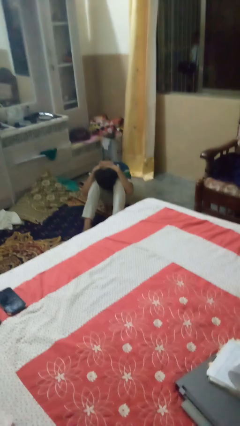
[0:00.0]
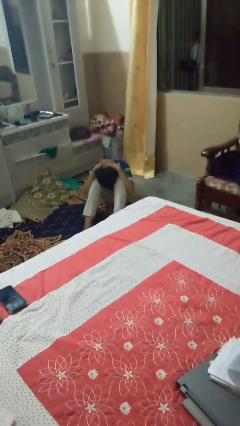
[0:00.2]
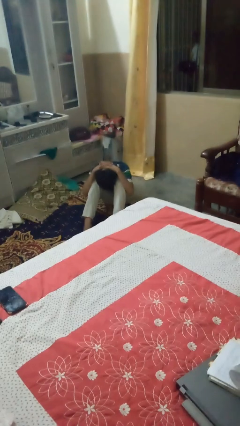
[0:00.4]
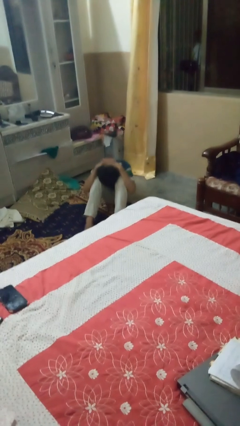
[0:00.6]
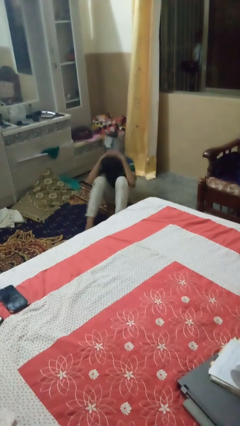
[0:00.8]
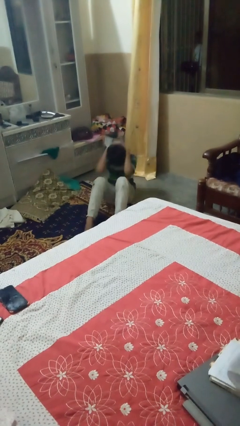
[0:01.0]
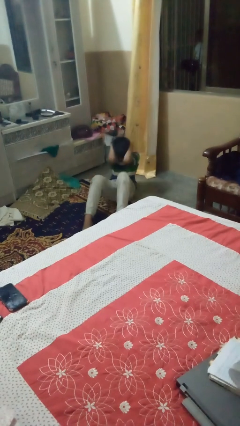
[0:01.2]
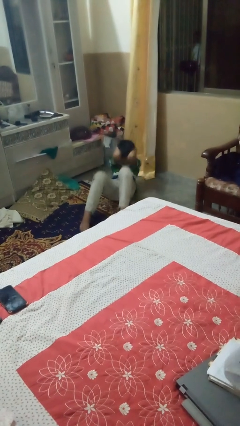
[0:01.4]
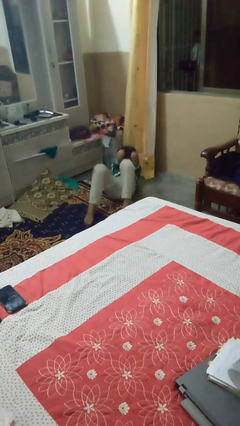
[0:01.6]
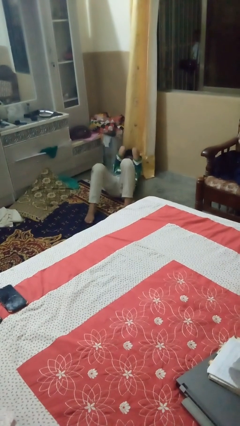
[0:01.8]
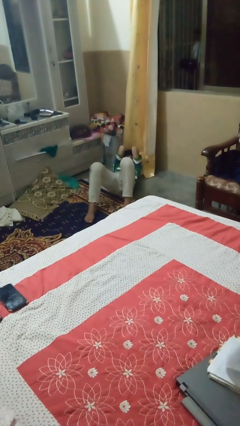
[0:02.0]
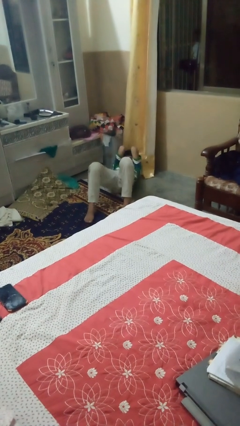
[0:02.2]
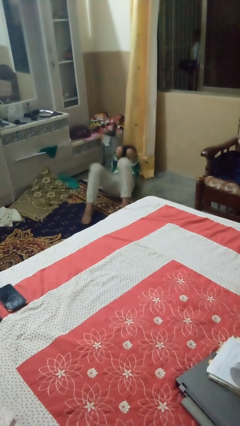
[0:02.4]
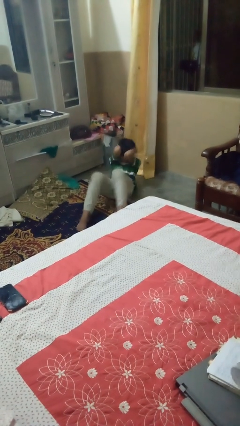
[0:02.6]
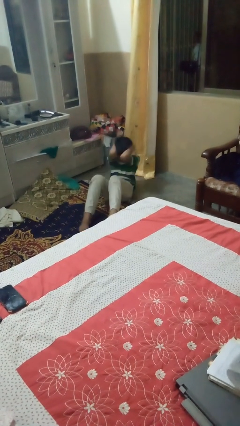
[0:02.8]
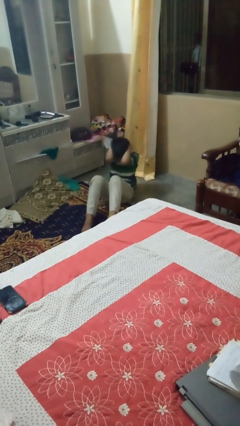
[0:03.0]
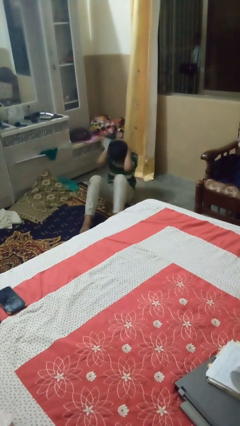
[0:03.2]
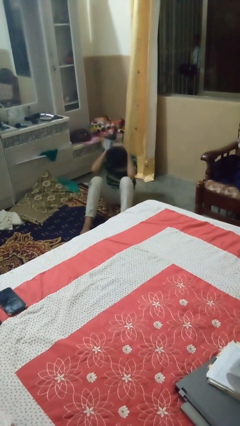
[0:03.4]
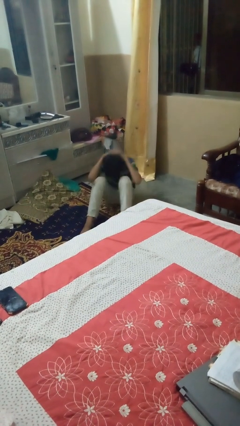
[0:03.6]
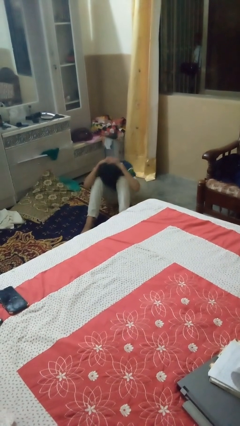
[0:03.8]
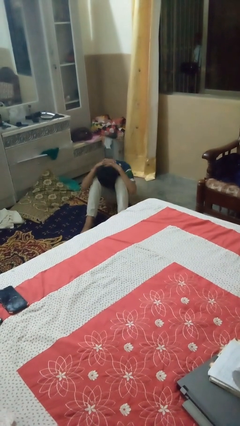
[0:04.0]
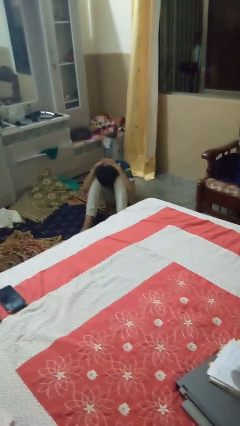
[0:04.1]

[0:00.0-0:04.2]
person exercises with situp

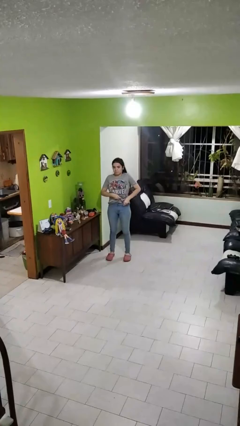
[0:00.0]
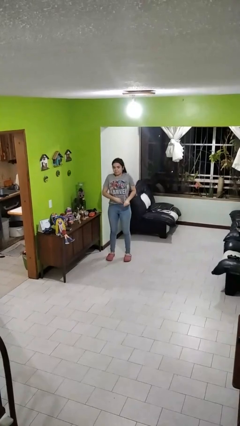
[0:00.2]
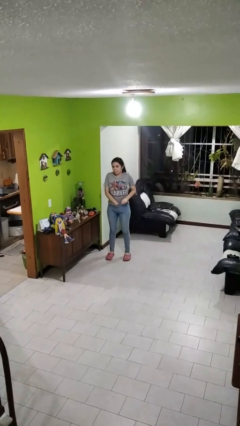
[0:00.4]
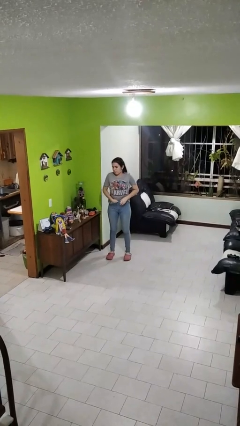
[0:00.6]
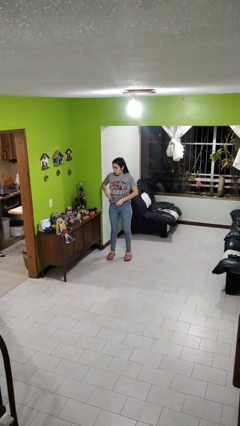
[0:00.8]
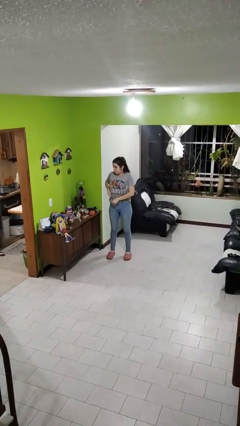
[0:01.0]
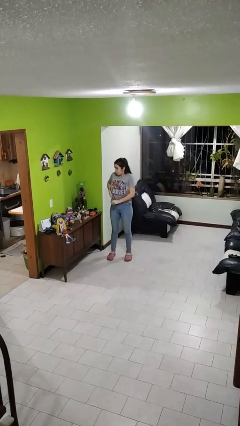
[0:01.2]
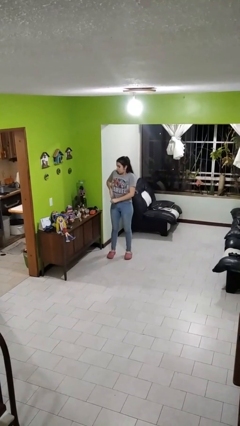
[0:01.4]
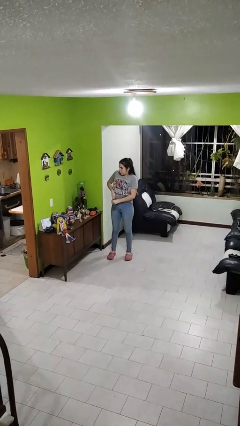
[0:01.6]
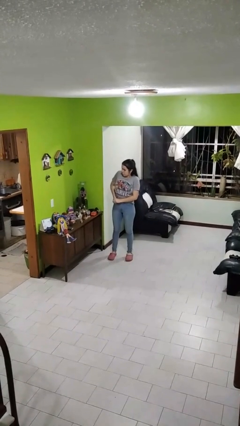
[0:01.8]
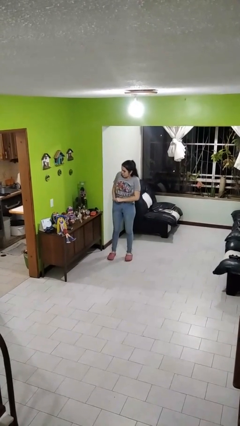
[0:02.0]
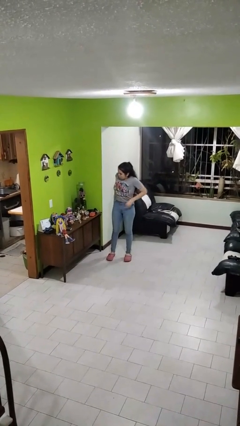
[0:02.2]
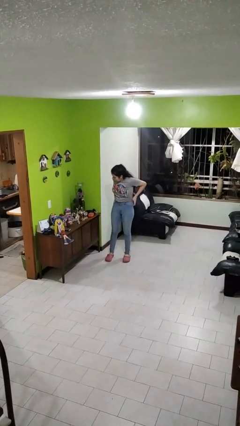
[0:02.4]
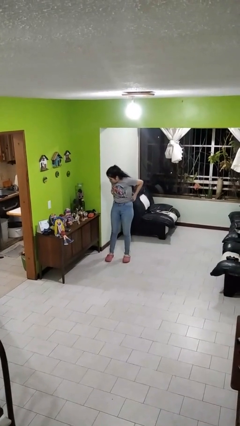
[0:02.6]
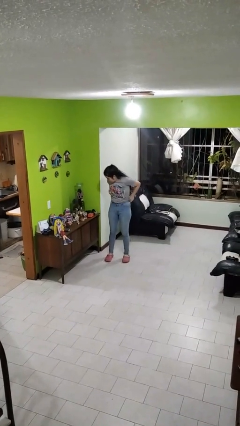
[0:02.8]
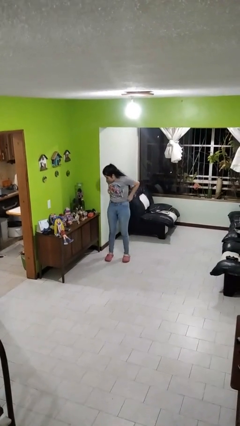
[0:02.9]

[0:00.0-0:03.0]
person tucks in shirt

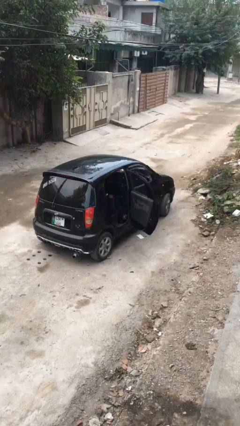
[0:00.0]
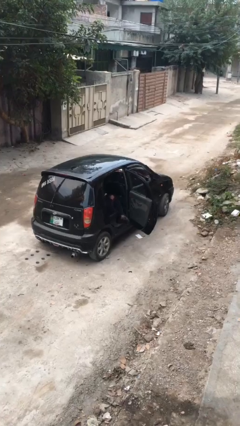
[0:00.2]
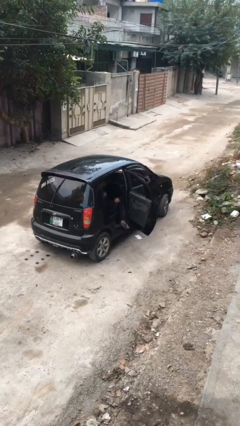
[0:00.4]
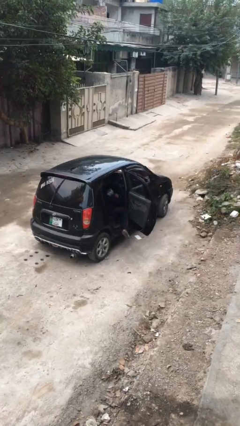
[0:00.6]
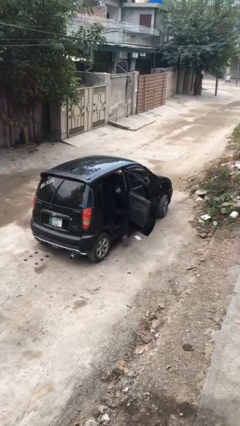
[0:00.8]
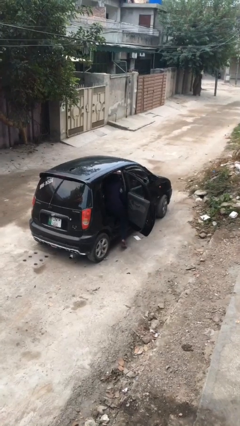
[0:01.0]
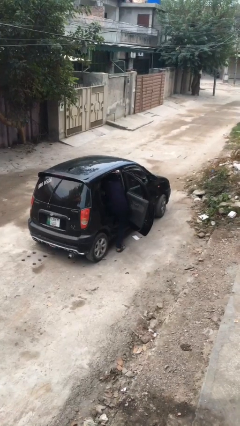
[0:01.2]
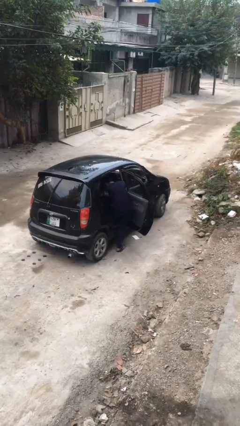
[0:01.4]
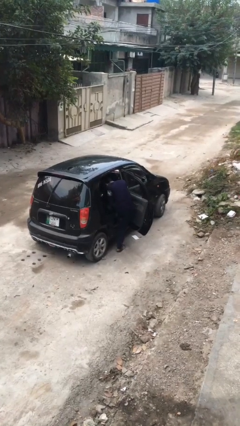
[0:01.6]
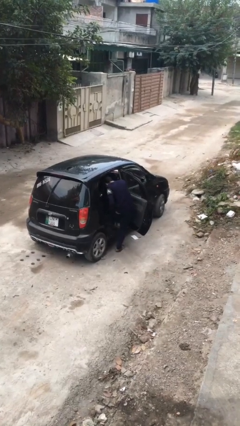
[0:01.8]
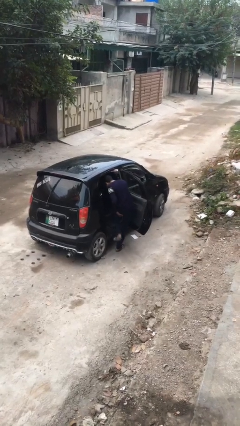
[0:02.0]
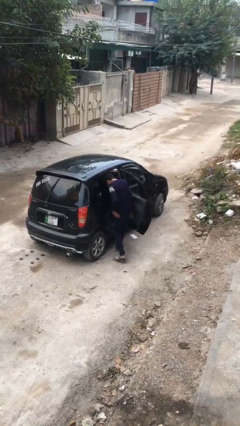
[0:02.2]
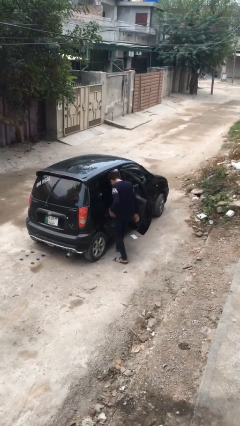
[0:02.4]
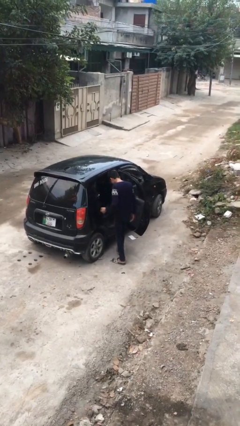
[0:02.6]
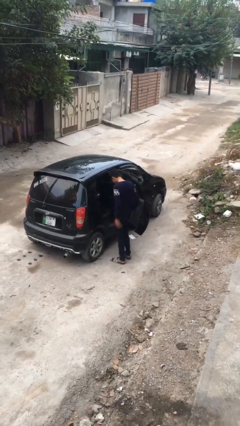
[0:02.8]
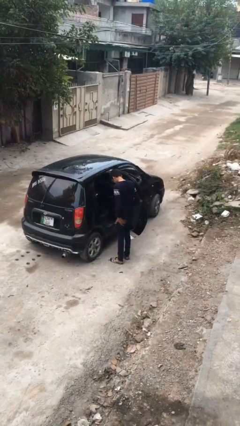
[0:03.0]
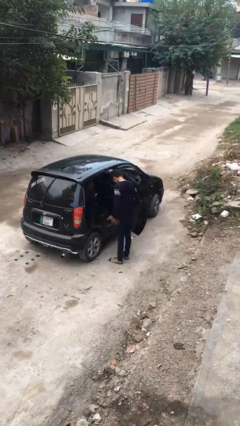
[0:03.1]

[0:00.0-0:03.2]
person exits car

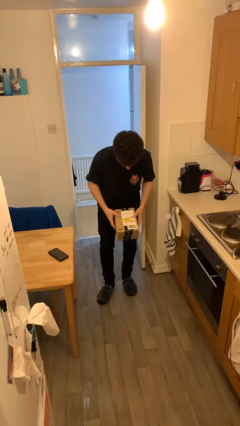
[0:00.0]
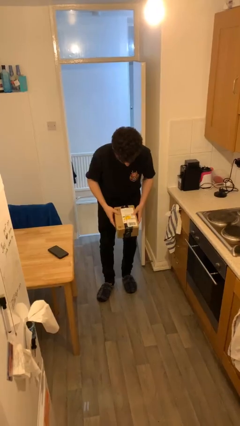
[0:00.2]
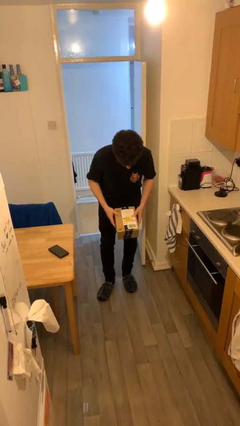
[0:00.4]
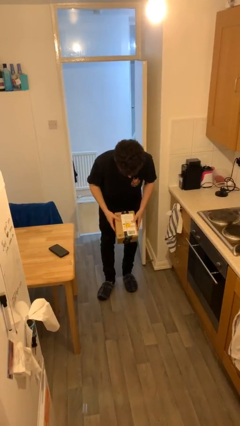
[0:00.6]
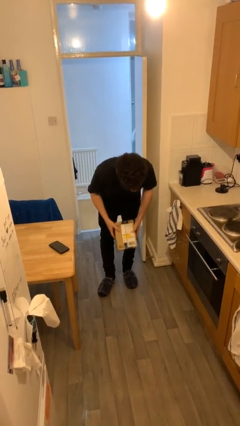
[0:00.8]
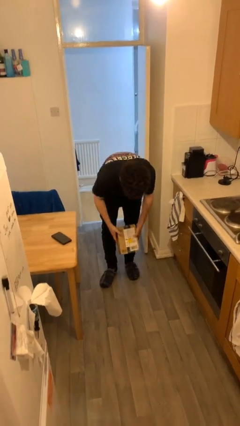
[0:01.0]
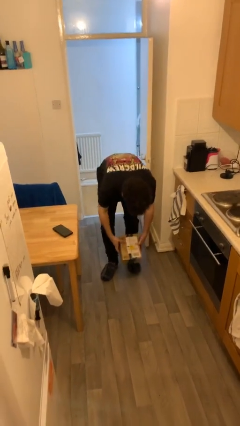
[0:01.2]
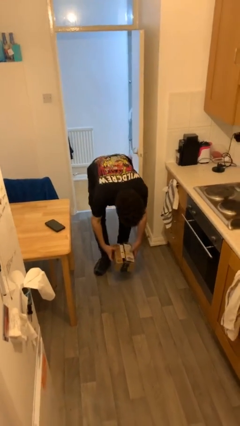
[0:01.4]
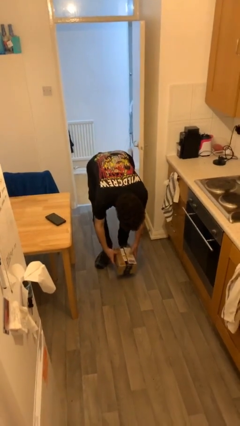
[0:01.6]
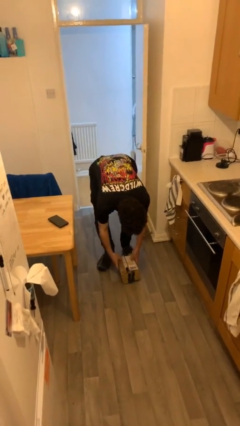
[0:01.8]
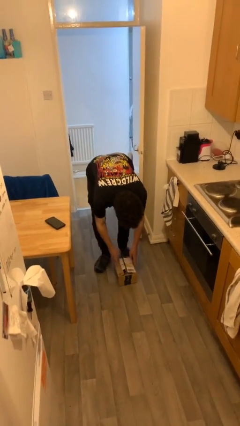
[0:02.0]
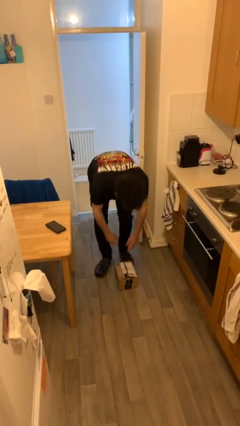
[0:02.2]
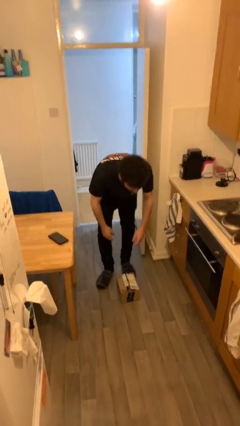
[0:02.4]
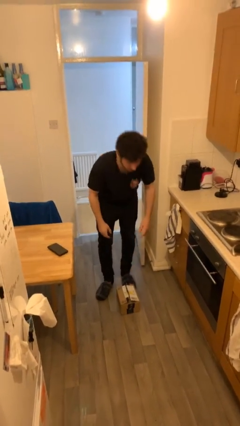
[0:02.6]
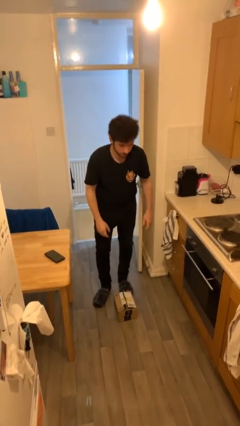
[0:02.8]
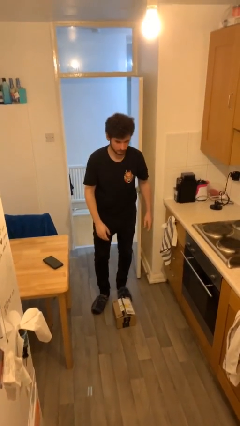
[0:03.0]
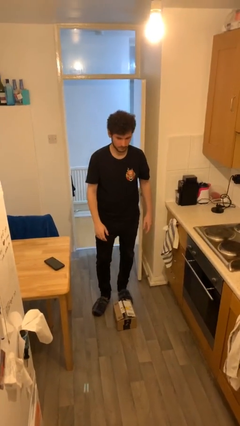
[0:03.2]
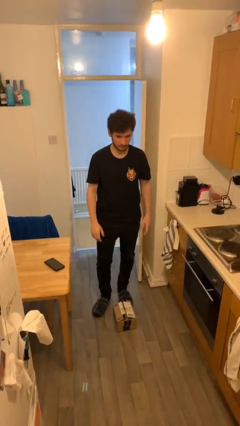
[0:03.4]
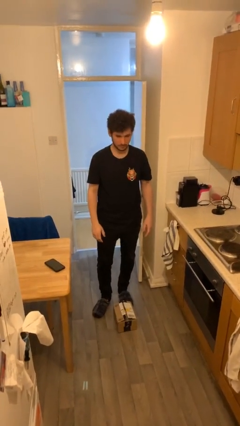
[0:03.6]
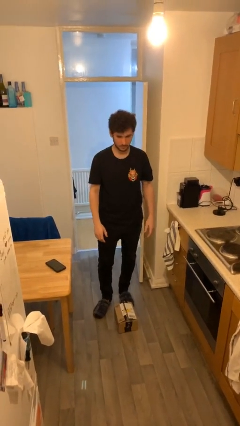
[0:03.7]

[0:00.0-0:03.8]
person puts down object on floor

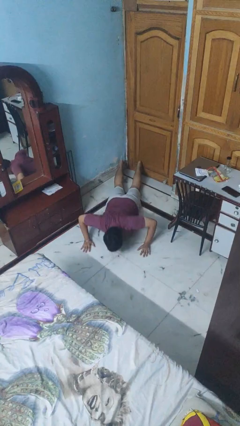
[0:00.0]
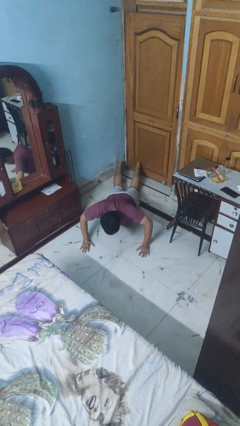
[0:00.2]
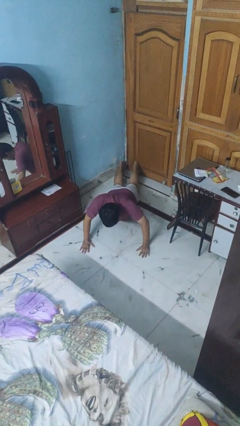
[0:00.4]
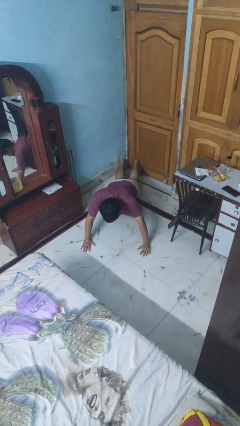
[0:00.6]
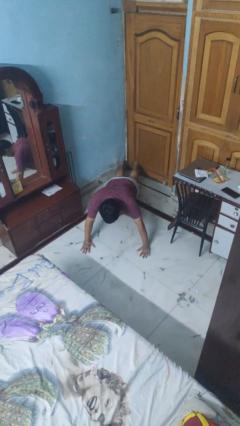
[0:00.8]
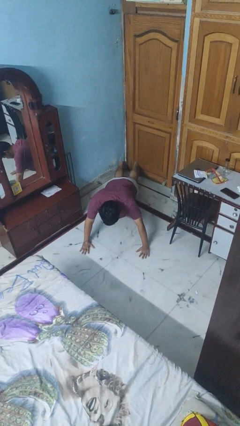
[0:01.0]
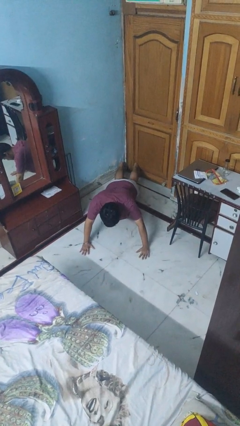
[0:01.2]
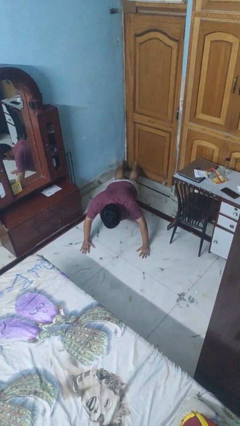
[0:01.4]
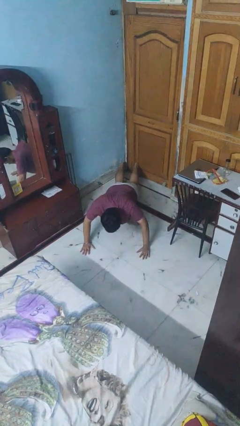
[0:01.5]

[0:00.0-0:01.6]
person exercises with pushup

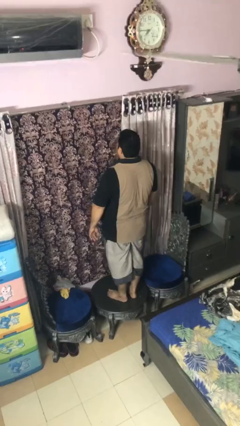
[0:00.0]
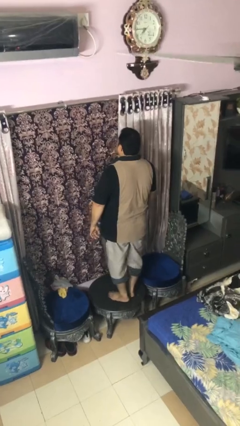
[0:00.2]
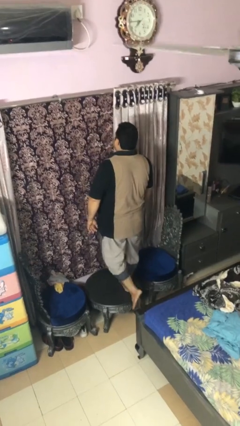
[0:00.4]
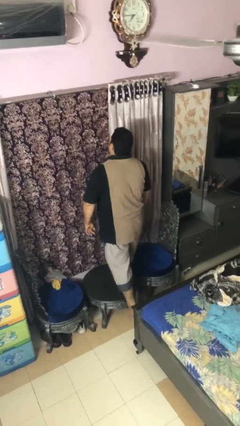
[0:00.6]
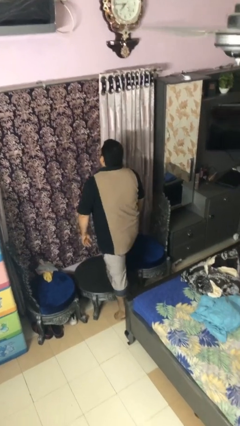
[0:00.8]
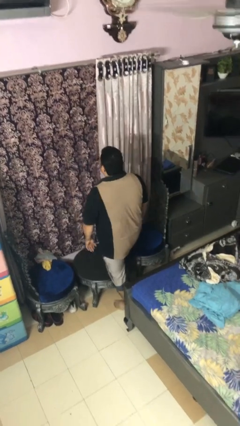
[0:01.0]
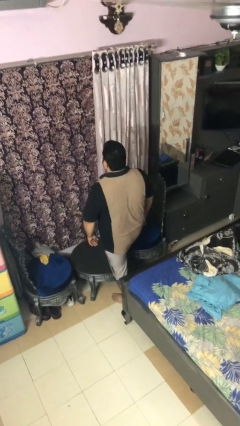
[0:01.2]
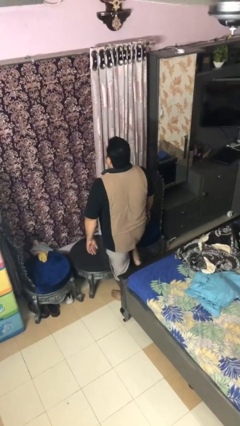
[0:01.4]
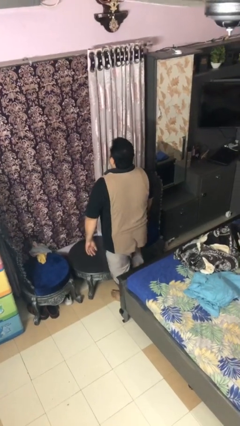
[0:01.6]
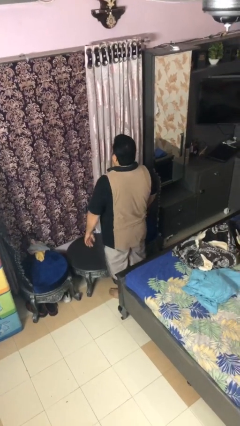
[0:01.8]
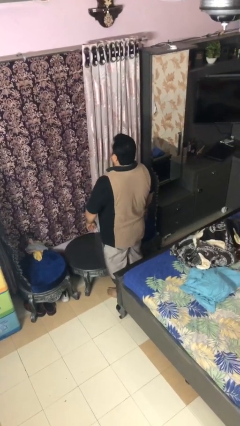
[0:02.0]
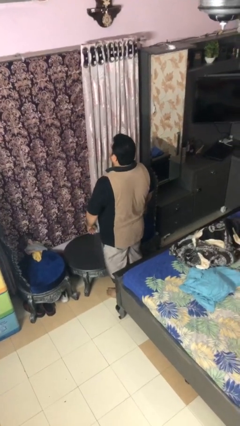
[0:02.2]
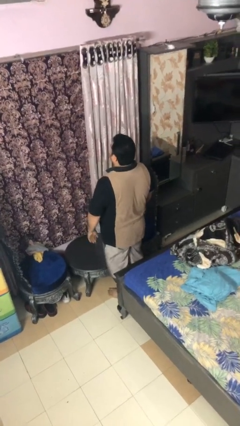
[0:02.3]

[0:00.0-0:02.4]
person climbs off table
